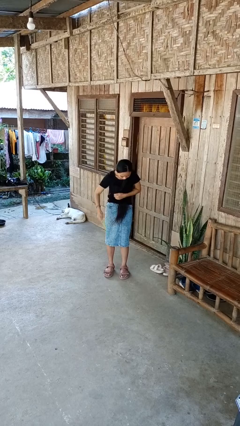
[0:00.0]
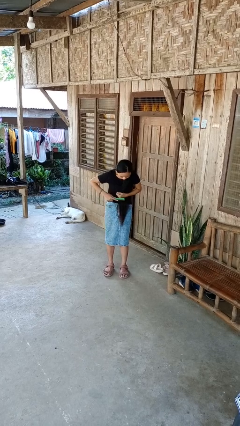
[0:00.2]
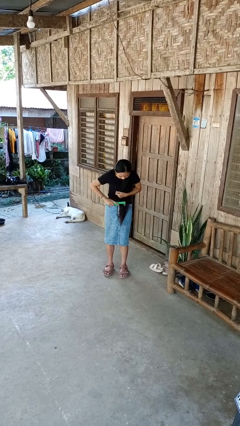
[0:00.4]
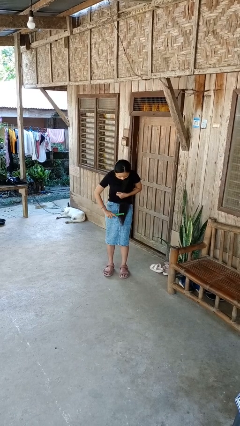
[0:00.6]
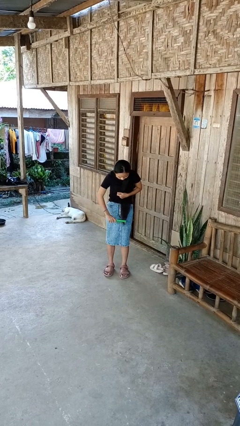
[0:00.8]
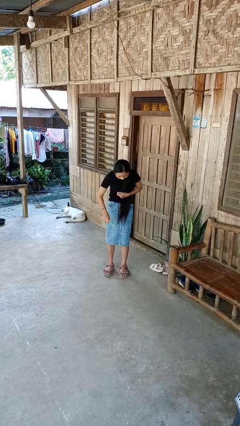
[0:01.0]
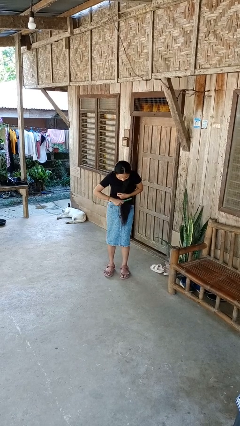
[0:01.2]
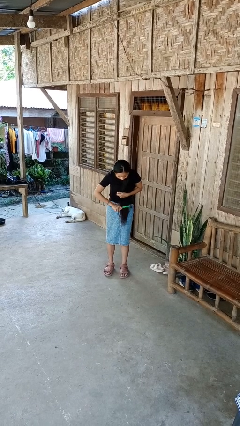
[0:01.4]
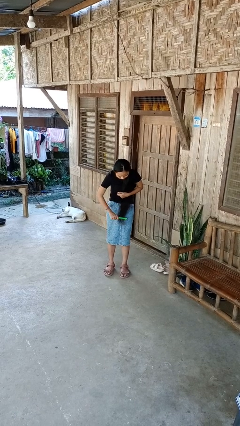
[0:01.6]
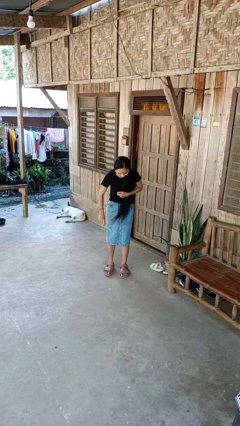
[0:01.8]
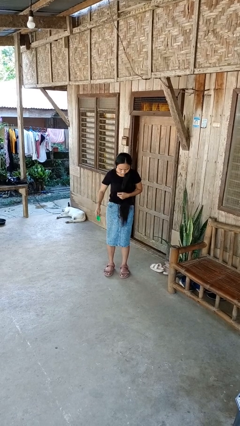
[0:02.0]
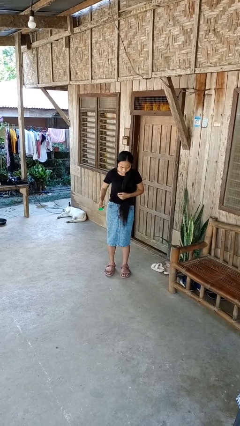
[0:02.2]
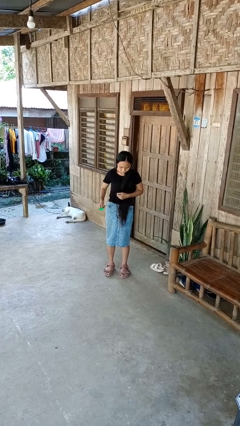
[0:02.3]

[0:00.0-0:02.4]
person brushes hair

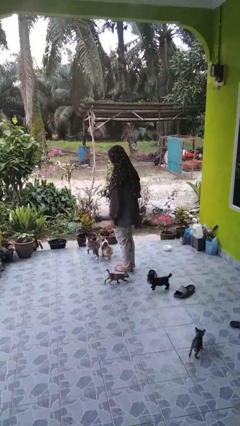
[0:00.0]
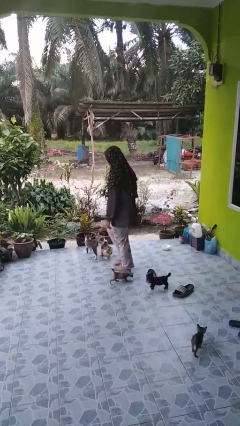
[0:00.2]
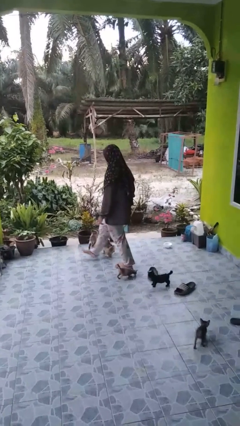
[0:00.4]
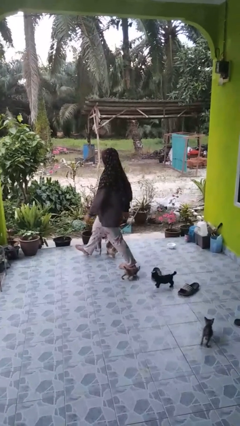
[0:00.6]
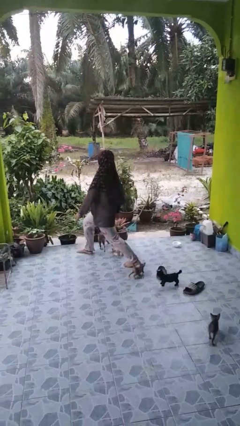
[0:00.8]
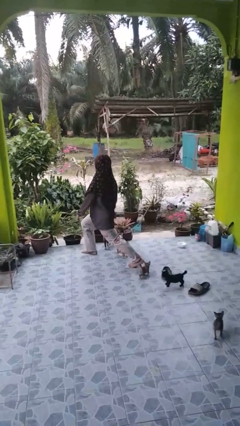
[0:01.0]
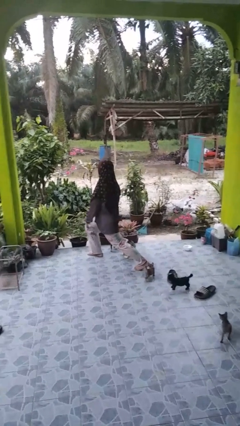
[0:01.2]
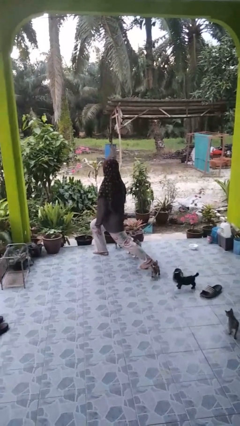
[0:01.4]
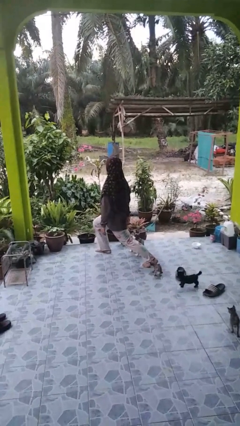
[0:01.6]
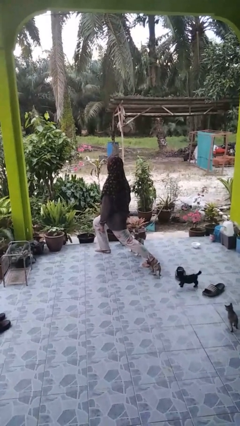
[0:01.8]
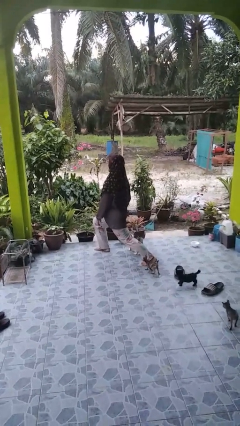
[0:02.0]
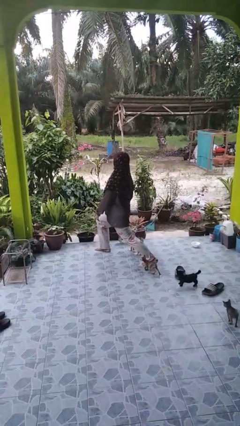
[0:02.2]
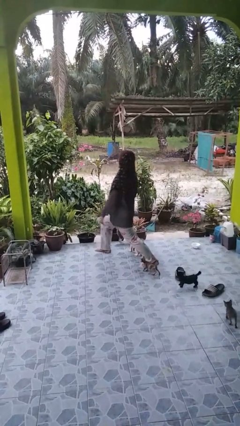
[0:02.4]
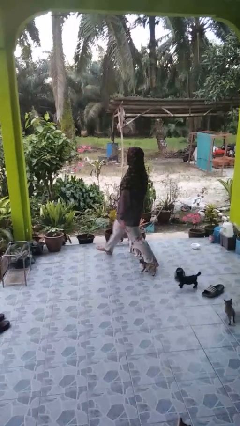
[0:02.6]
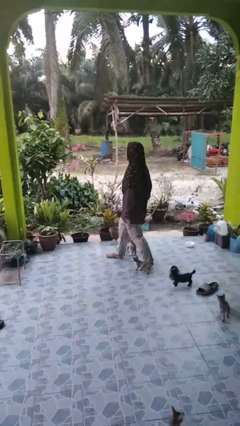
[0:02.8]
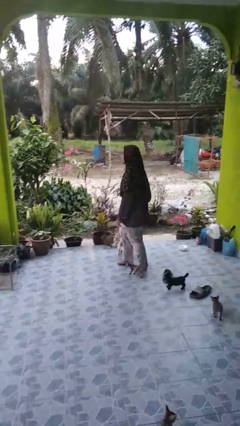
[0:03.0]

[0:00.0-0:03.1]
person exercises with lunges

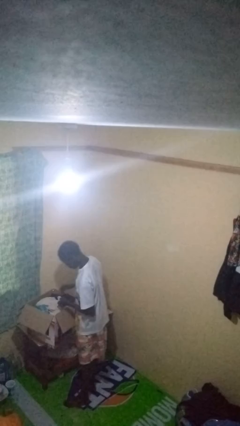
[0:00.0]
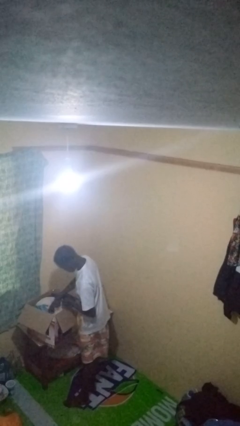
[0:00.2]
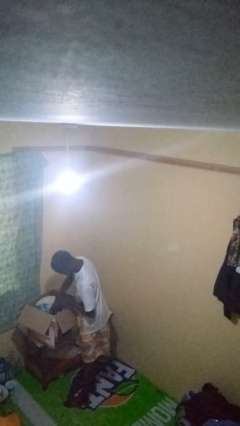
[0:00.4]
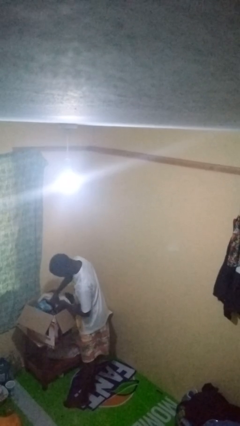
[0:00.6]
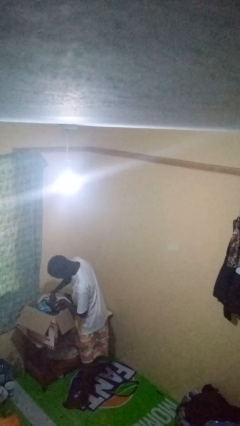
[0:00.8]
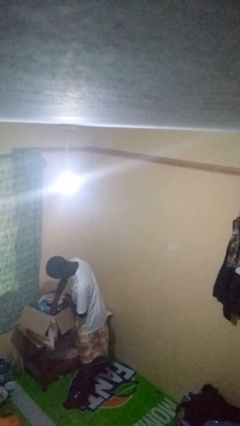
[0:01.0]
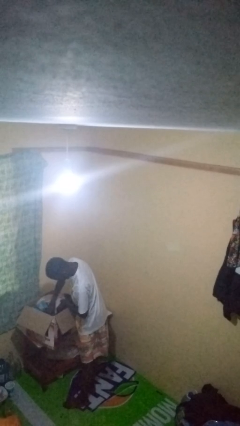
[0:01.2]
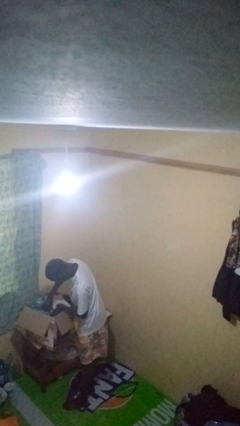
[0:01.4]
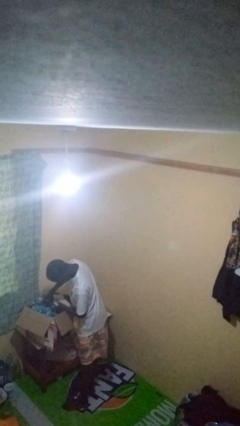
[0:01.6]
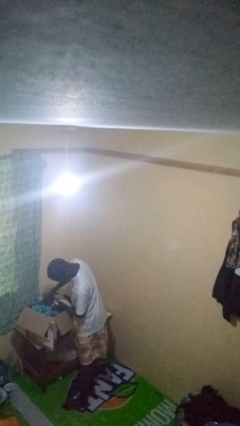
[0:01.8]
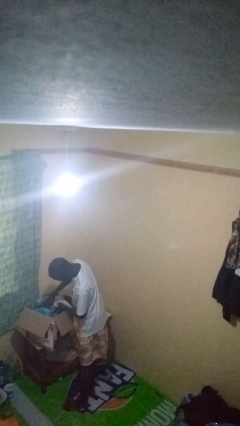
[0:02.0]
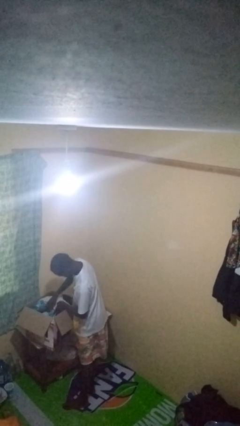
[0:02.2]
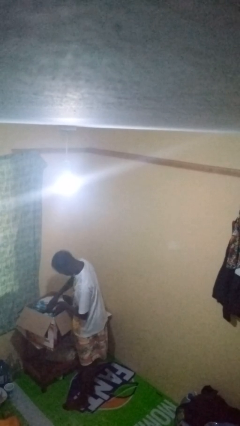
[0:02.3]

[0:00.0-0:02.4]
person searches in box

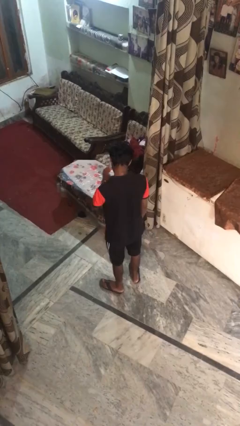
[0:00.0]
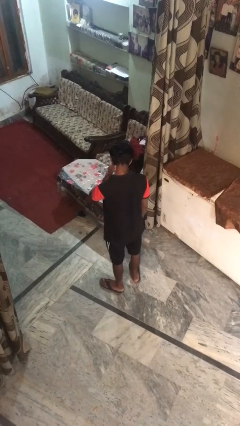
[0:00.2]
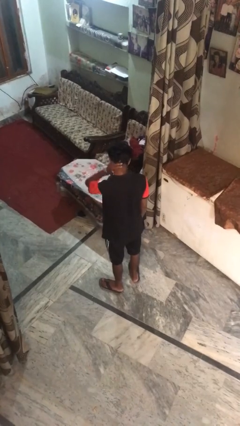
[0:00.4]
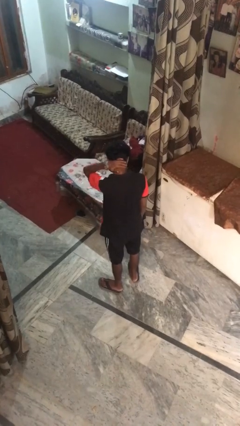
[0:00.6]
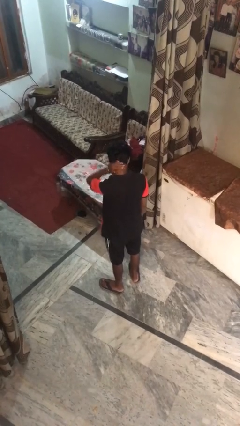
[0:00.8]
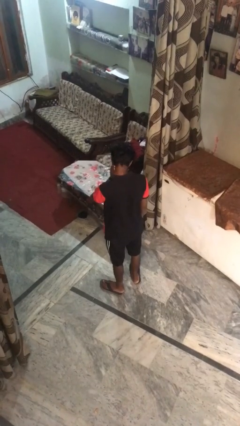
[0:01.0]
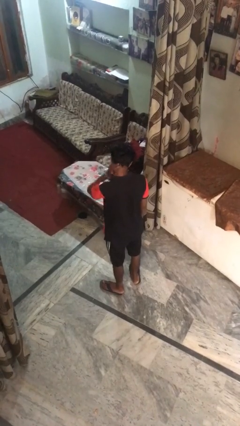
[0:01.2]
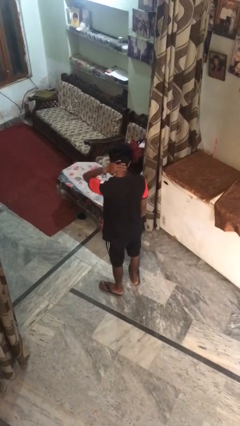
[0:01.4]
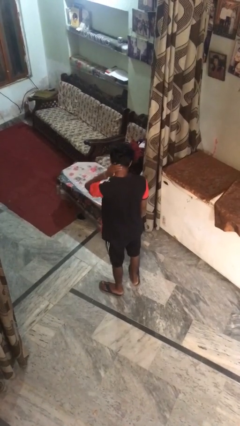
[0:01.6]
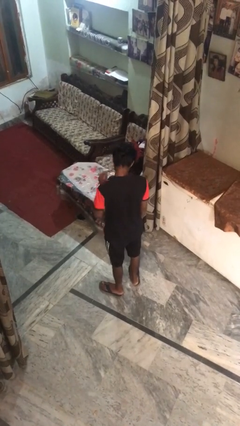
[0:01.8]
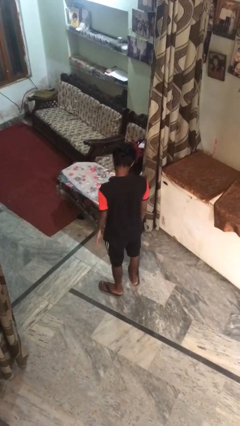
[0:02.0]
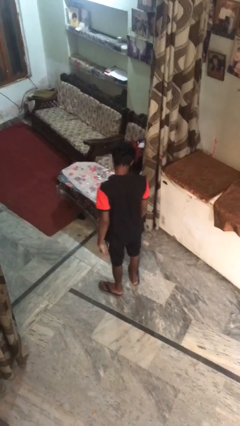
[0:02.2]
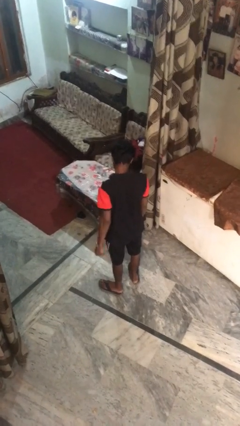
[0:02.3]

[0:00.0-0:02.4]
person rubs neck

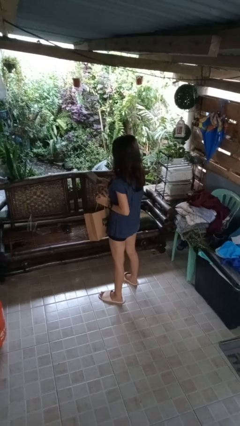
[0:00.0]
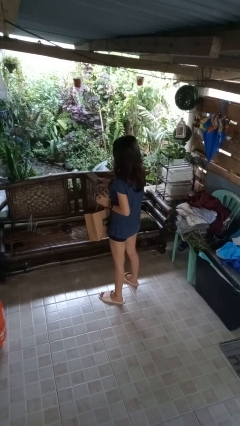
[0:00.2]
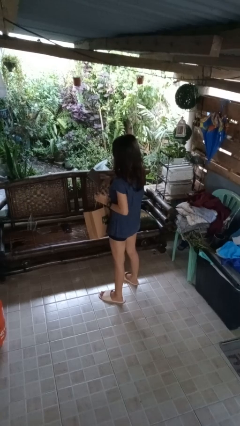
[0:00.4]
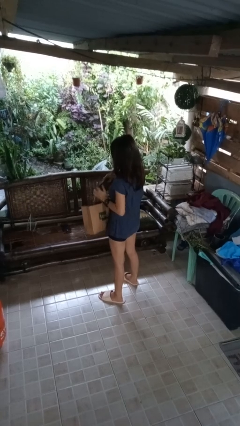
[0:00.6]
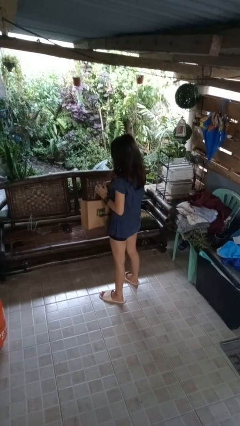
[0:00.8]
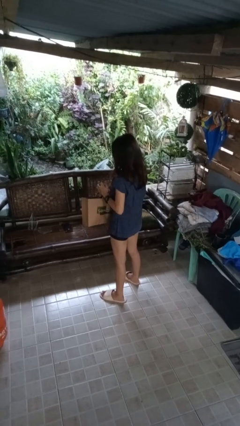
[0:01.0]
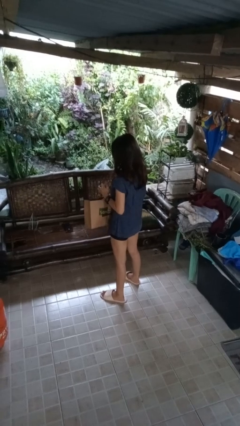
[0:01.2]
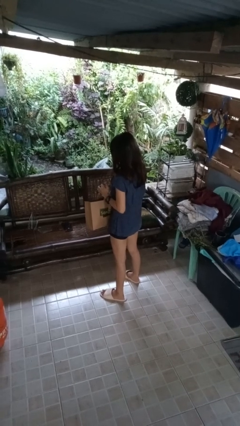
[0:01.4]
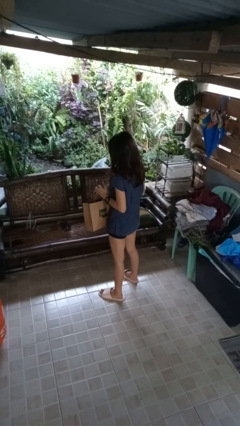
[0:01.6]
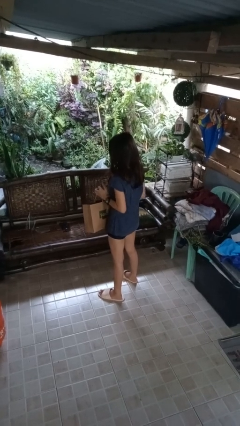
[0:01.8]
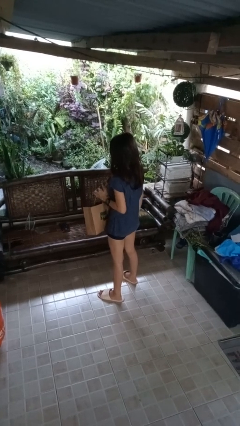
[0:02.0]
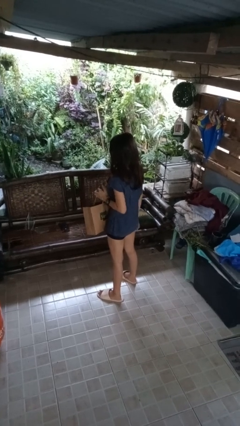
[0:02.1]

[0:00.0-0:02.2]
person puts object into bag

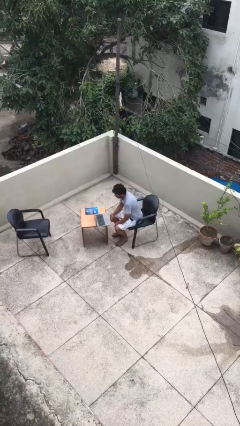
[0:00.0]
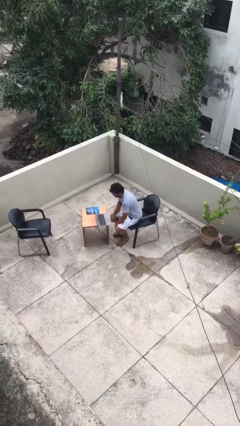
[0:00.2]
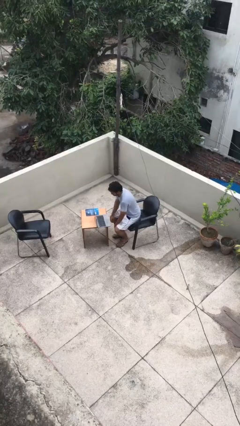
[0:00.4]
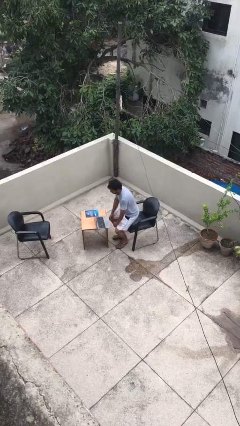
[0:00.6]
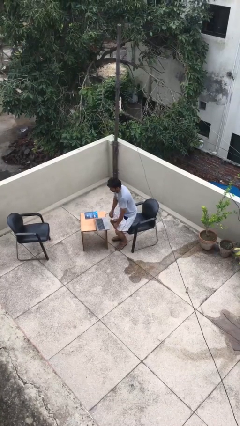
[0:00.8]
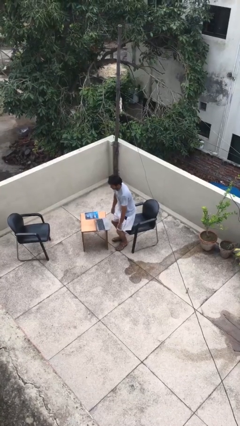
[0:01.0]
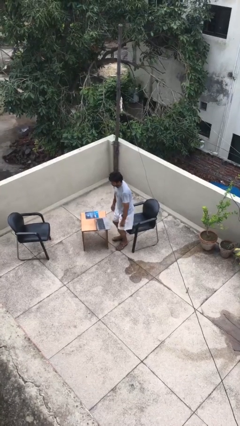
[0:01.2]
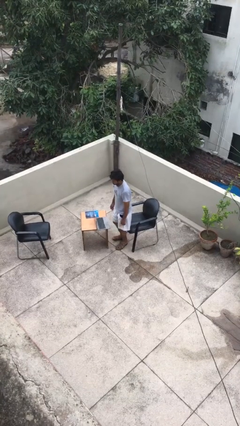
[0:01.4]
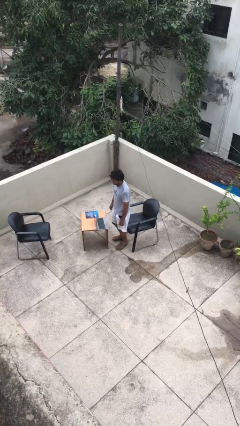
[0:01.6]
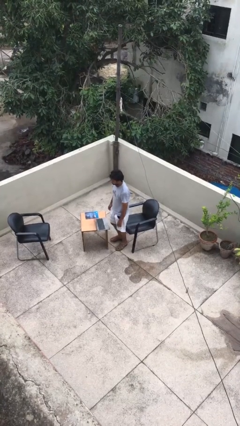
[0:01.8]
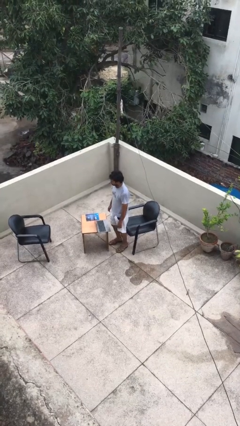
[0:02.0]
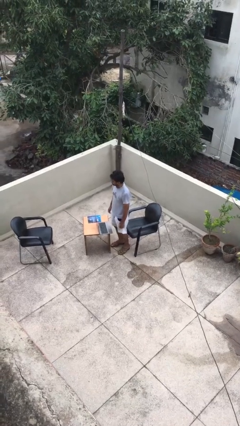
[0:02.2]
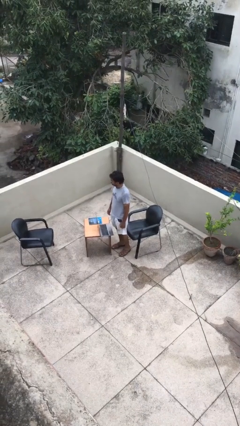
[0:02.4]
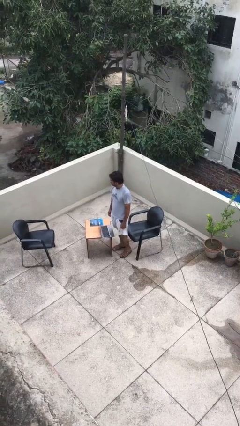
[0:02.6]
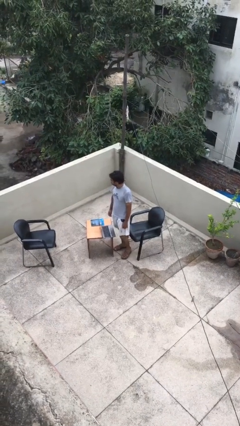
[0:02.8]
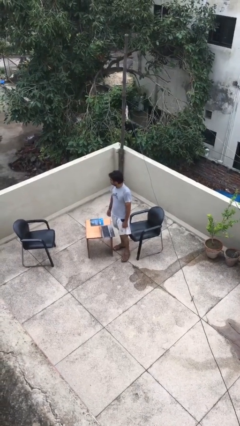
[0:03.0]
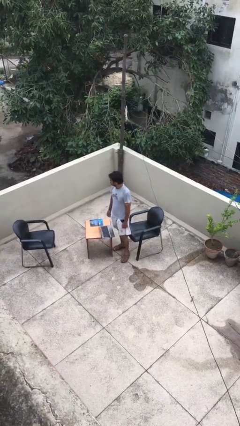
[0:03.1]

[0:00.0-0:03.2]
person stands up

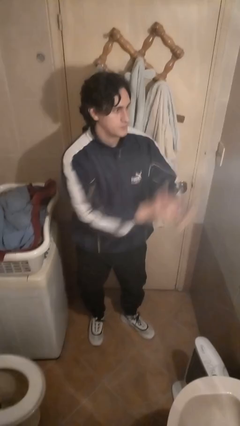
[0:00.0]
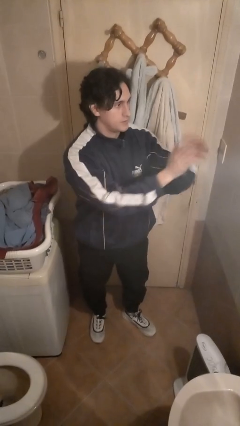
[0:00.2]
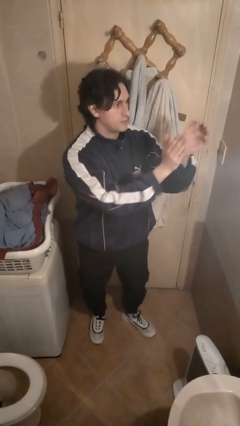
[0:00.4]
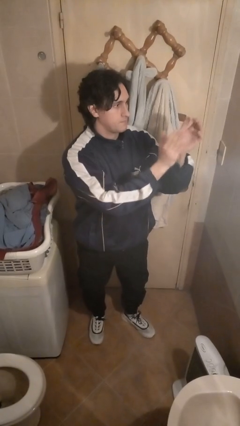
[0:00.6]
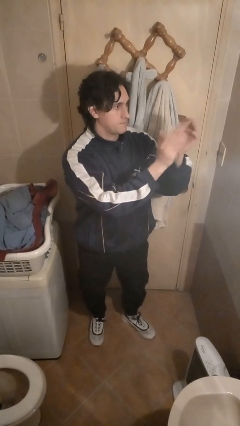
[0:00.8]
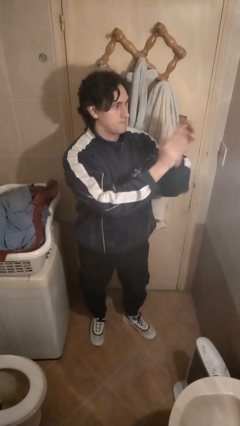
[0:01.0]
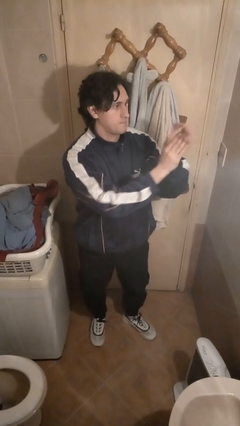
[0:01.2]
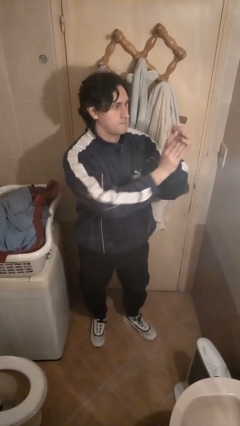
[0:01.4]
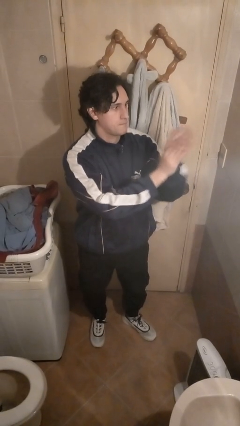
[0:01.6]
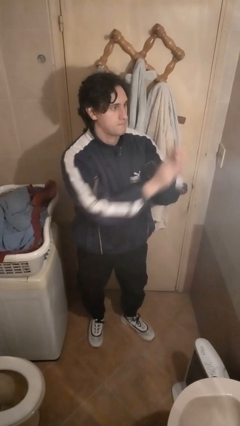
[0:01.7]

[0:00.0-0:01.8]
person claps hands

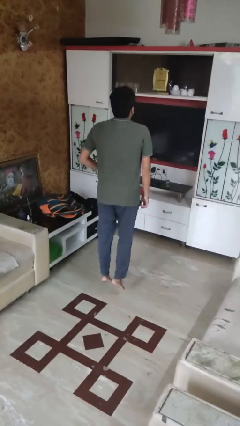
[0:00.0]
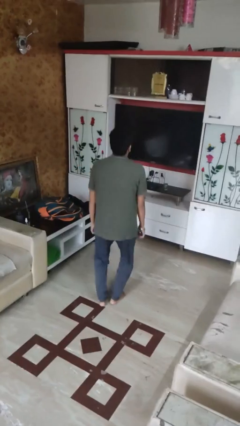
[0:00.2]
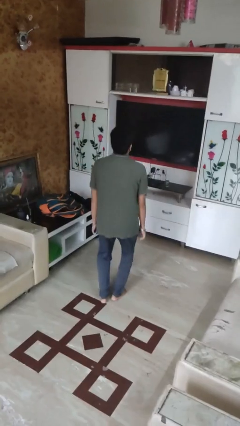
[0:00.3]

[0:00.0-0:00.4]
person jumps
